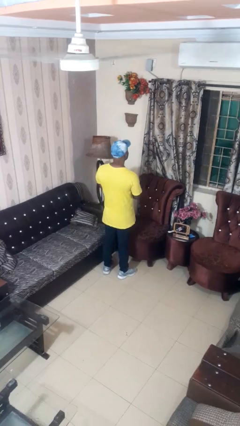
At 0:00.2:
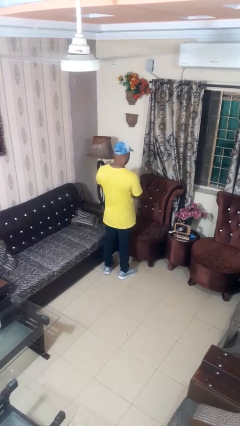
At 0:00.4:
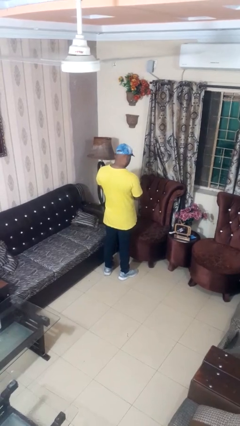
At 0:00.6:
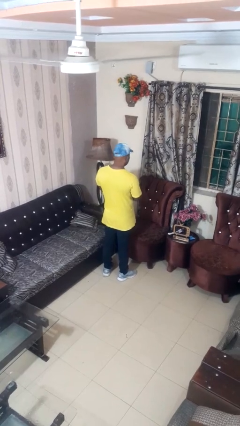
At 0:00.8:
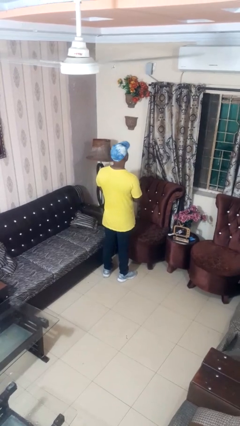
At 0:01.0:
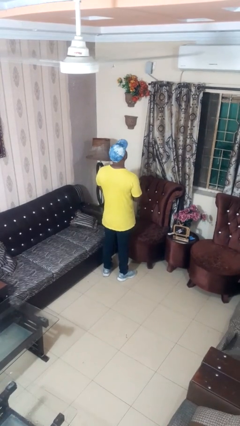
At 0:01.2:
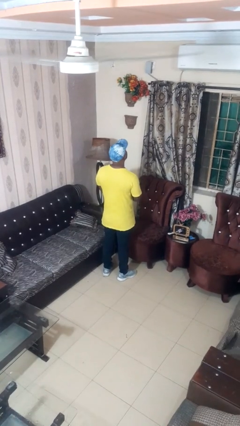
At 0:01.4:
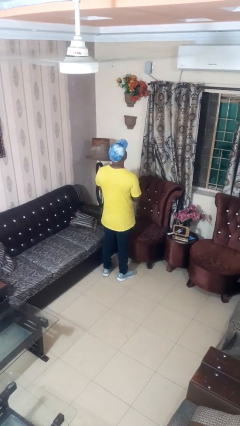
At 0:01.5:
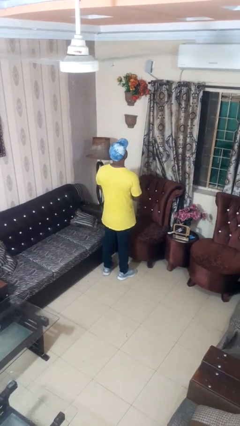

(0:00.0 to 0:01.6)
person shakes head

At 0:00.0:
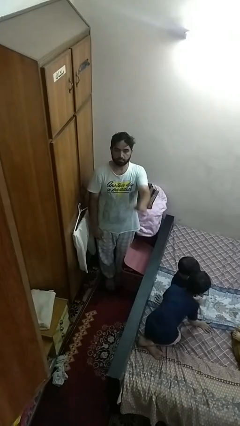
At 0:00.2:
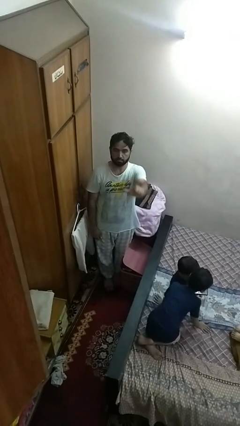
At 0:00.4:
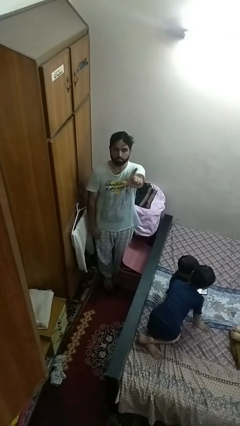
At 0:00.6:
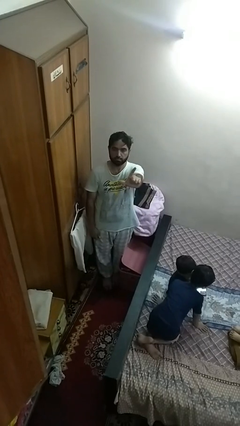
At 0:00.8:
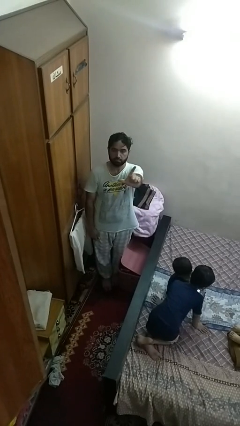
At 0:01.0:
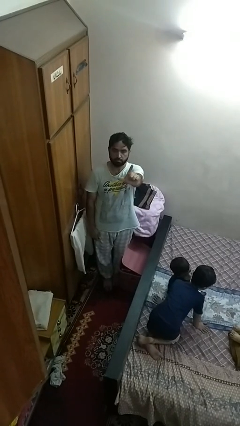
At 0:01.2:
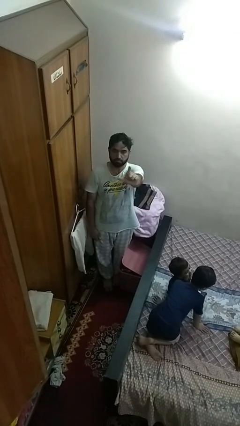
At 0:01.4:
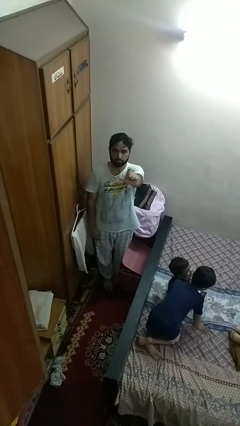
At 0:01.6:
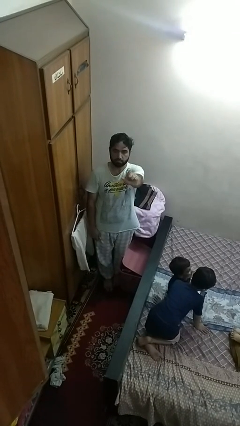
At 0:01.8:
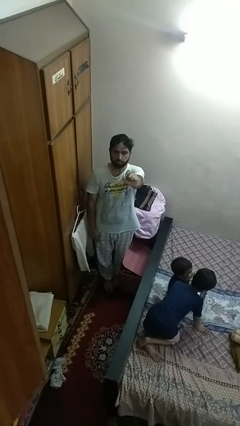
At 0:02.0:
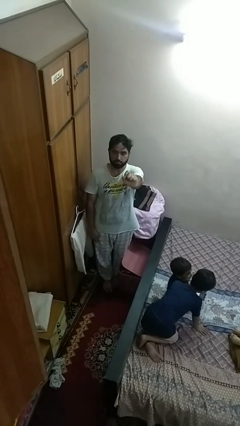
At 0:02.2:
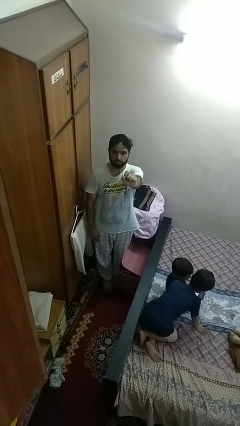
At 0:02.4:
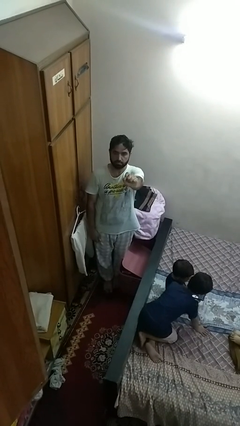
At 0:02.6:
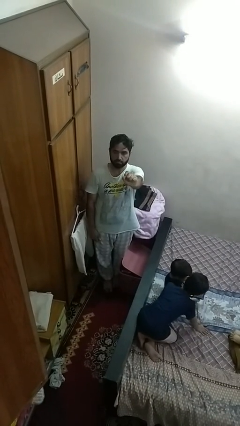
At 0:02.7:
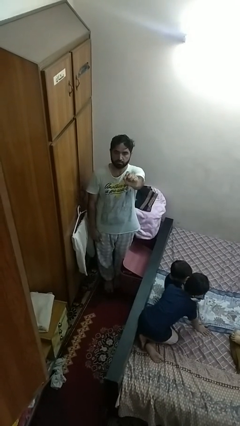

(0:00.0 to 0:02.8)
person gestures zoom in

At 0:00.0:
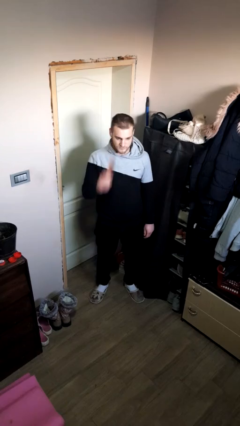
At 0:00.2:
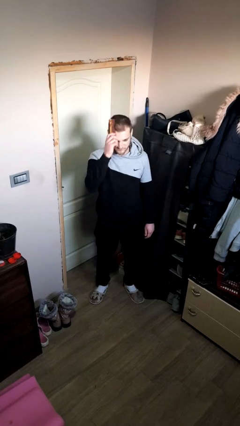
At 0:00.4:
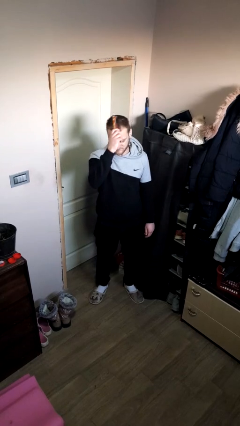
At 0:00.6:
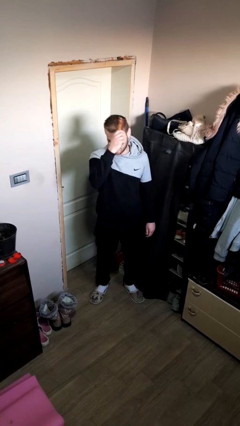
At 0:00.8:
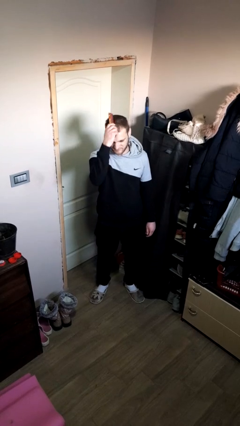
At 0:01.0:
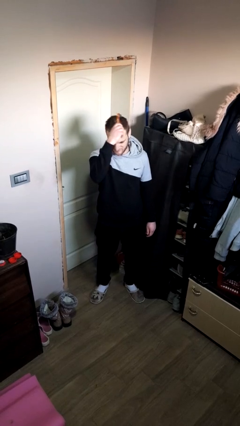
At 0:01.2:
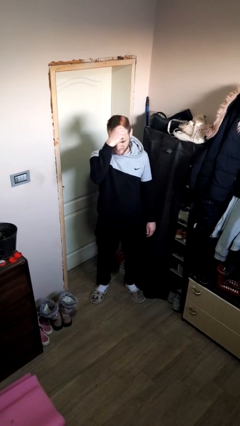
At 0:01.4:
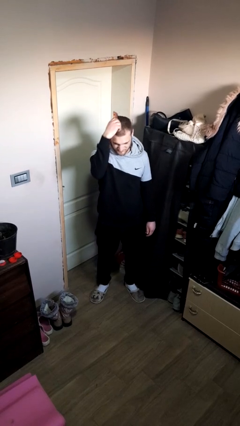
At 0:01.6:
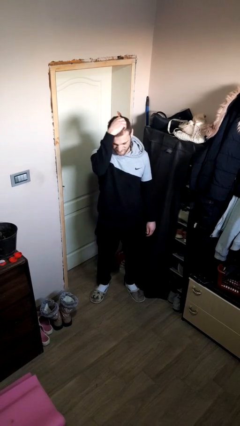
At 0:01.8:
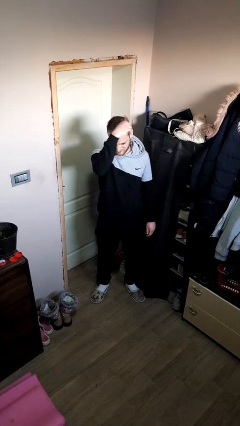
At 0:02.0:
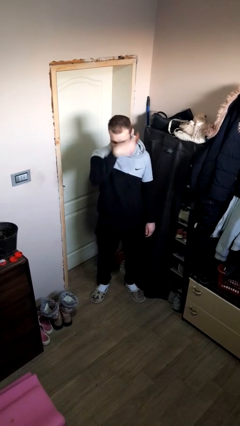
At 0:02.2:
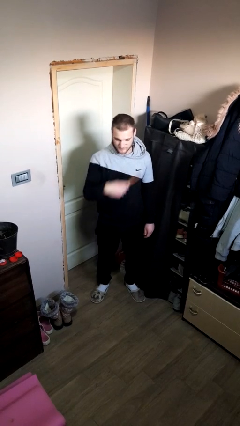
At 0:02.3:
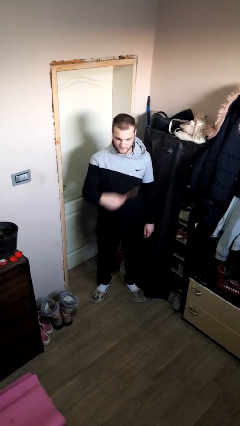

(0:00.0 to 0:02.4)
person brushes hair

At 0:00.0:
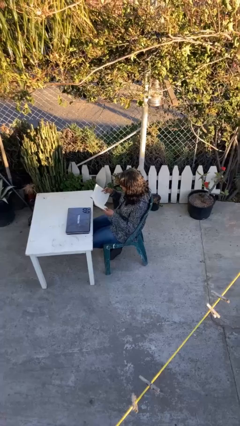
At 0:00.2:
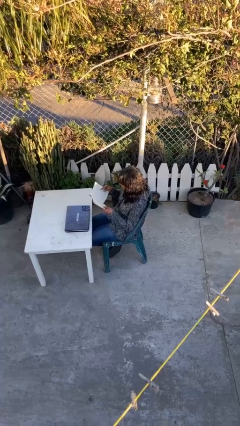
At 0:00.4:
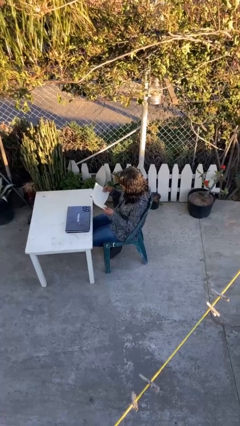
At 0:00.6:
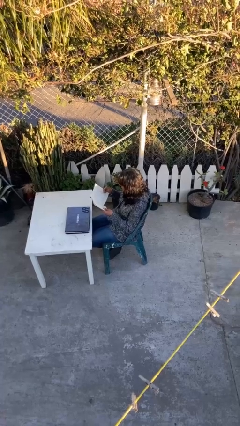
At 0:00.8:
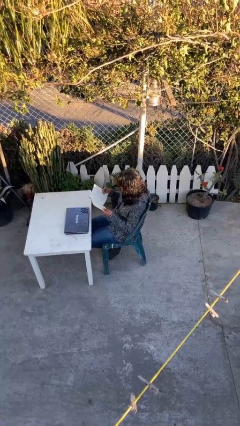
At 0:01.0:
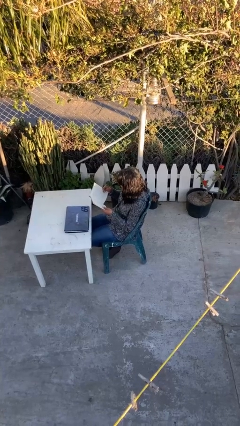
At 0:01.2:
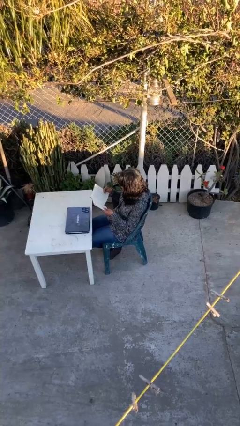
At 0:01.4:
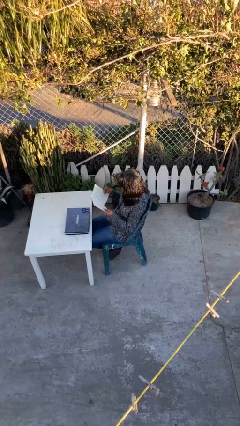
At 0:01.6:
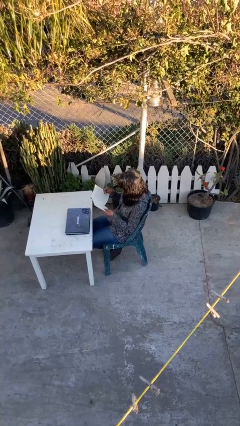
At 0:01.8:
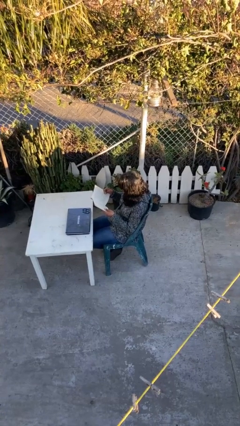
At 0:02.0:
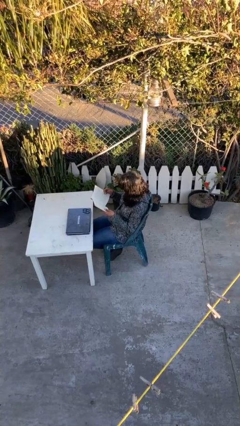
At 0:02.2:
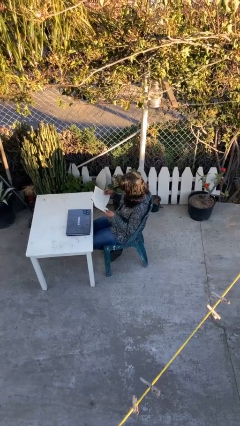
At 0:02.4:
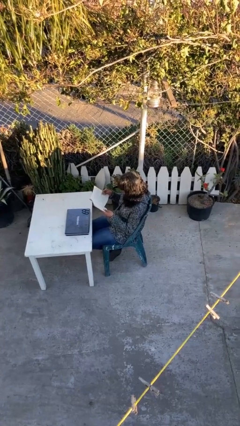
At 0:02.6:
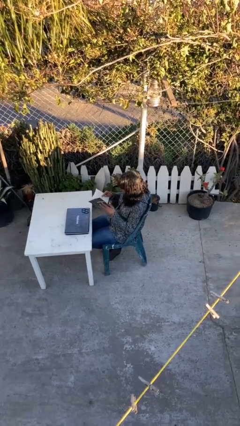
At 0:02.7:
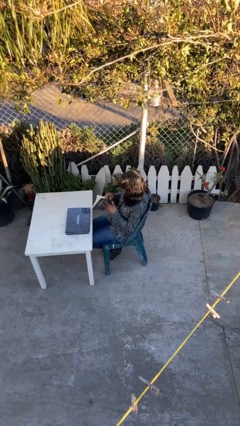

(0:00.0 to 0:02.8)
person reads document

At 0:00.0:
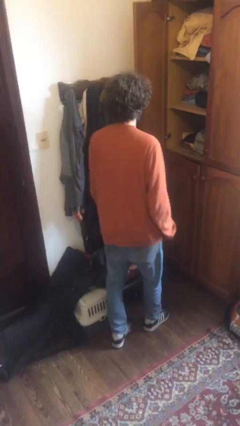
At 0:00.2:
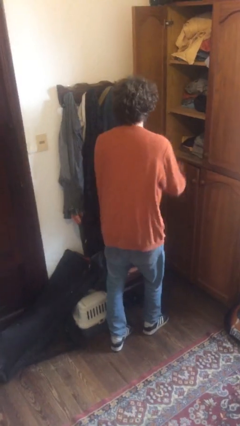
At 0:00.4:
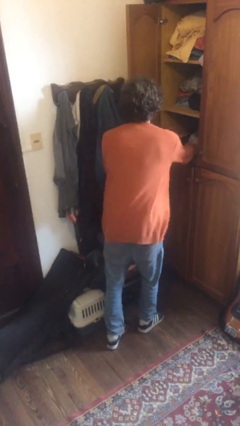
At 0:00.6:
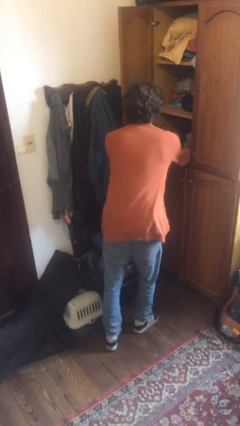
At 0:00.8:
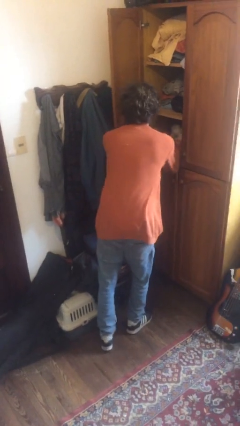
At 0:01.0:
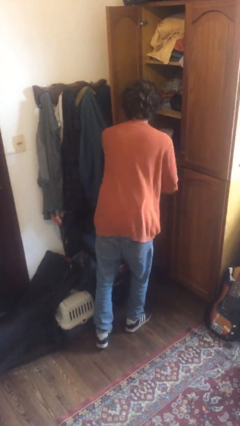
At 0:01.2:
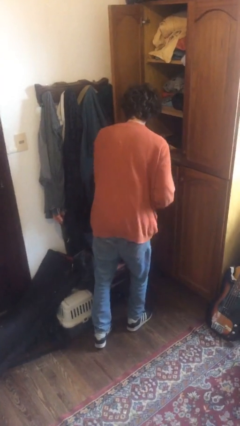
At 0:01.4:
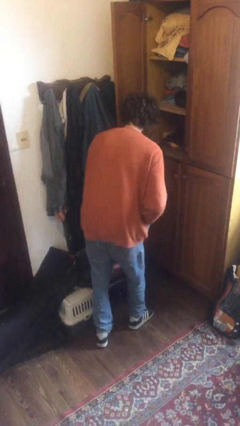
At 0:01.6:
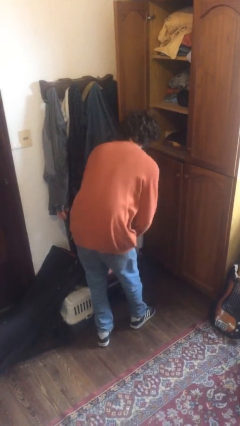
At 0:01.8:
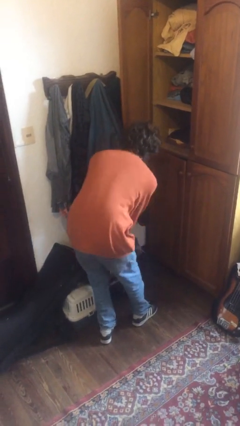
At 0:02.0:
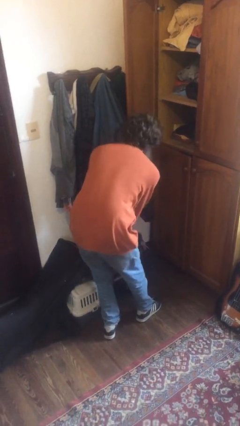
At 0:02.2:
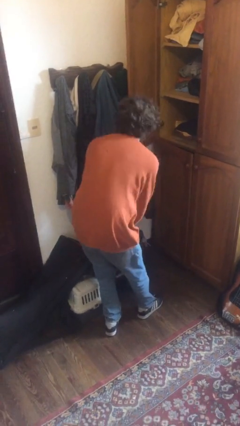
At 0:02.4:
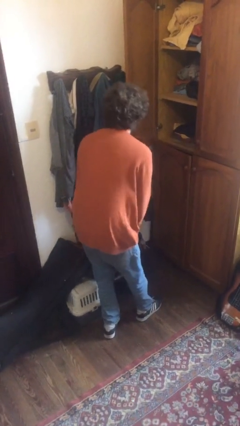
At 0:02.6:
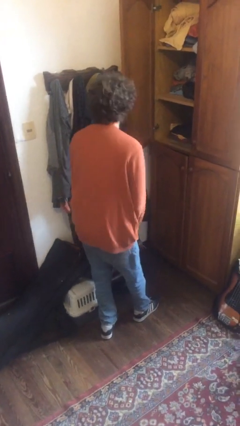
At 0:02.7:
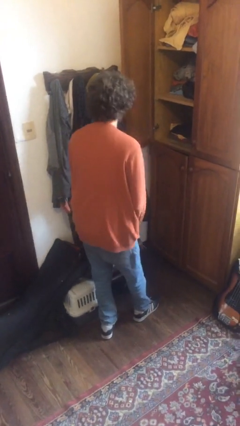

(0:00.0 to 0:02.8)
person takes clothes from dresser

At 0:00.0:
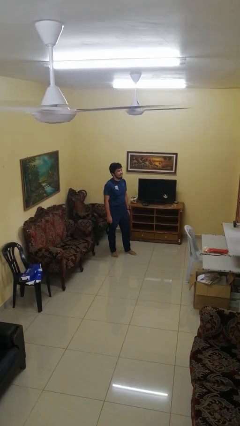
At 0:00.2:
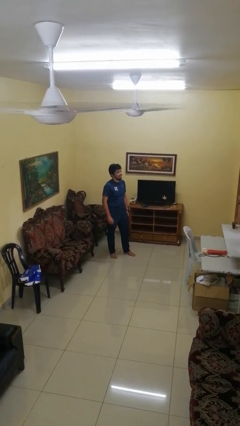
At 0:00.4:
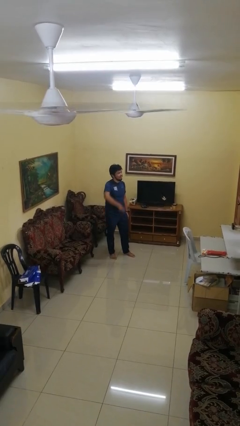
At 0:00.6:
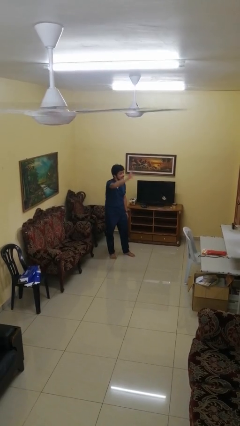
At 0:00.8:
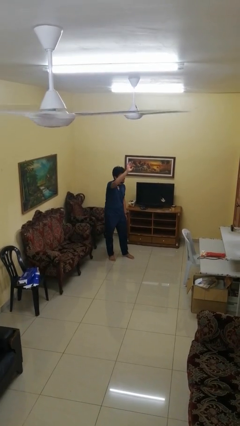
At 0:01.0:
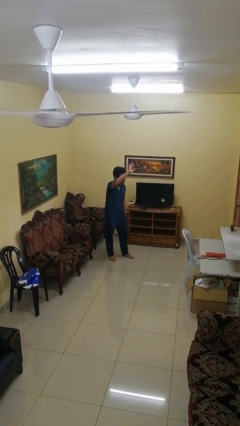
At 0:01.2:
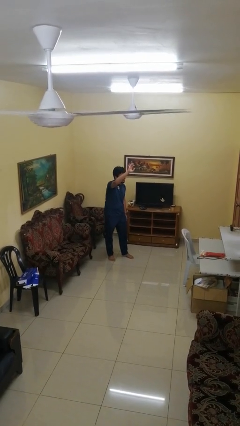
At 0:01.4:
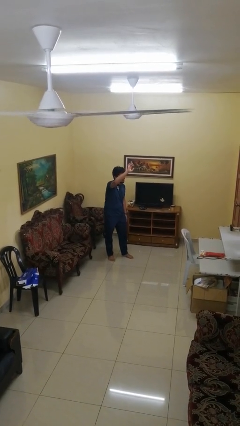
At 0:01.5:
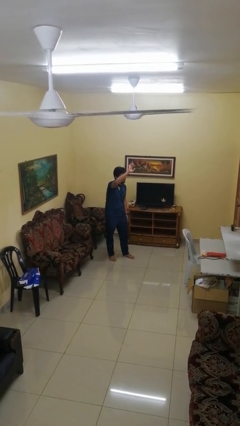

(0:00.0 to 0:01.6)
person gestures swipe up

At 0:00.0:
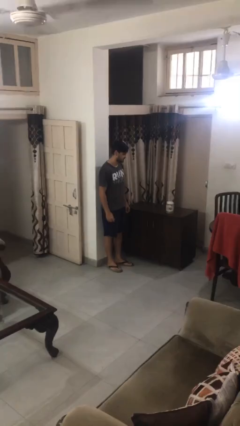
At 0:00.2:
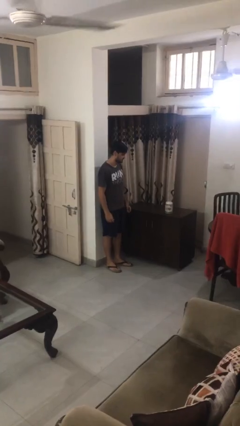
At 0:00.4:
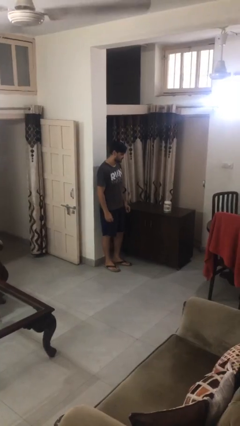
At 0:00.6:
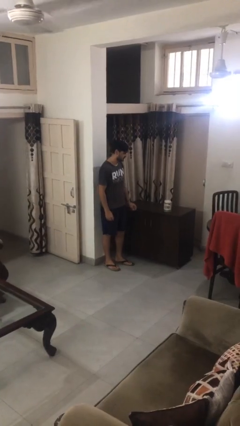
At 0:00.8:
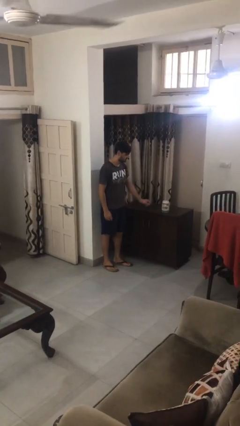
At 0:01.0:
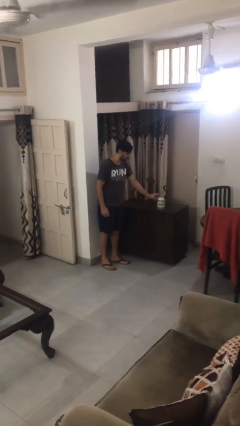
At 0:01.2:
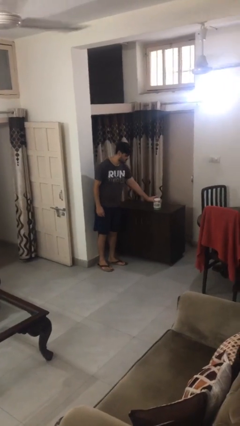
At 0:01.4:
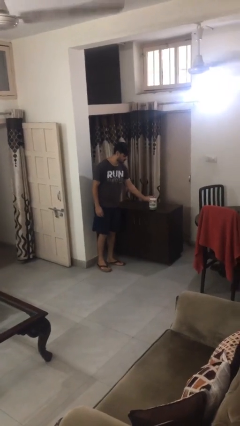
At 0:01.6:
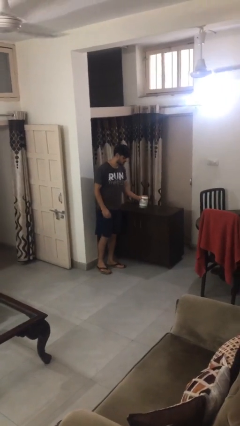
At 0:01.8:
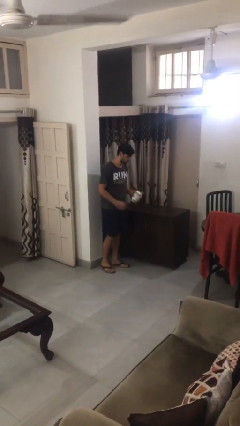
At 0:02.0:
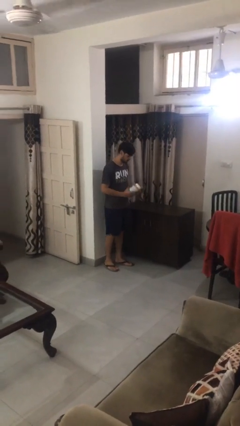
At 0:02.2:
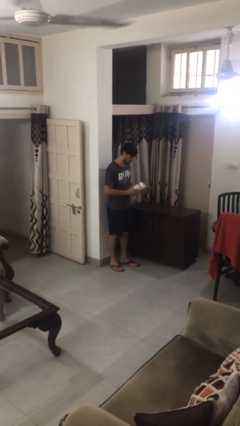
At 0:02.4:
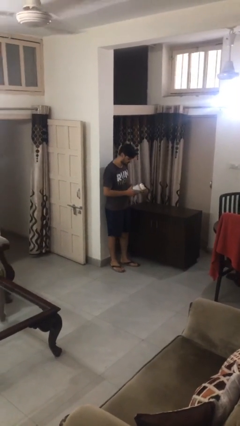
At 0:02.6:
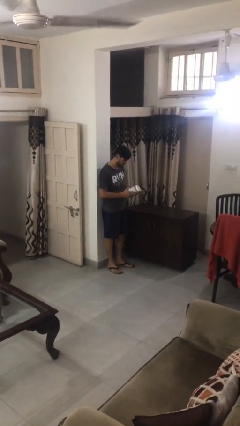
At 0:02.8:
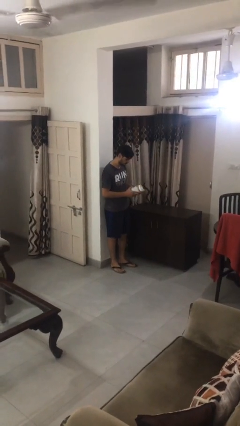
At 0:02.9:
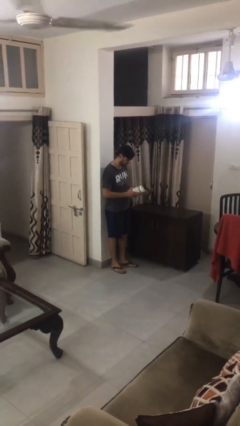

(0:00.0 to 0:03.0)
person picks up object from countertop
